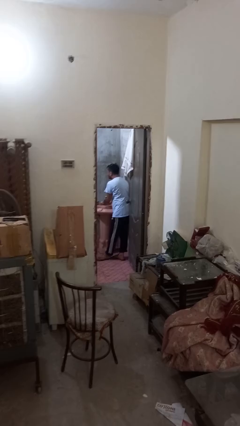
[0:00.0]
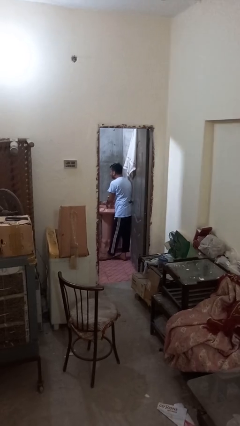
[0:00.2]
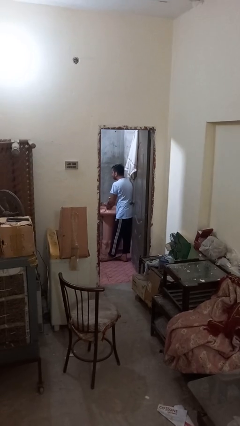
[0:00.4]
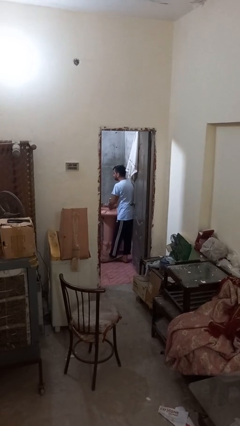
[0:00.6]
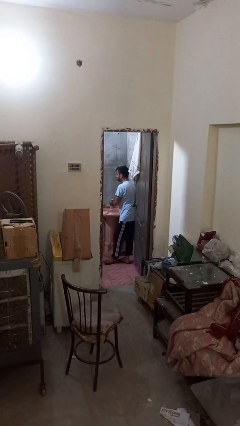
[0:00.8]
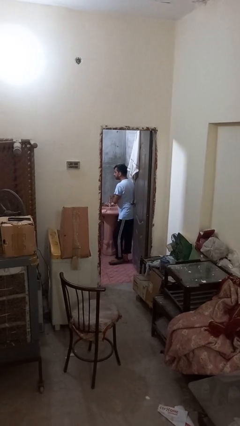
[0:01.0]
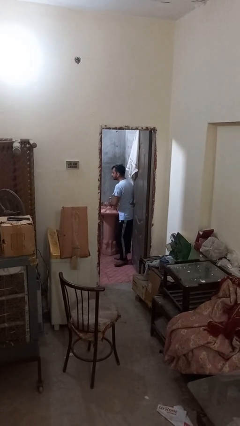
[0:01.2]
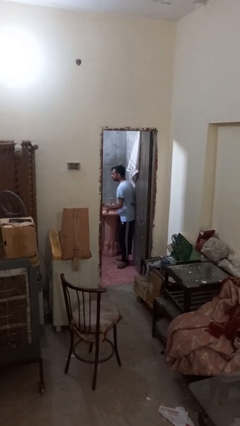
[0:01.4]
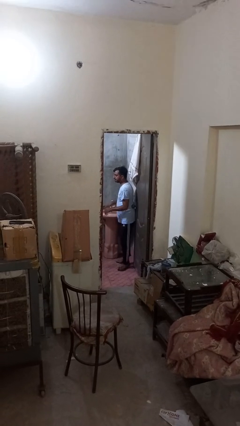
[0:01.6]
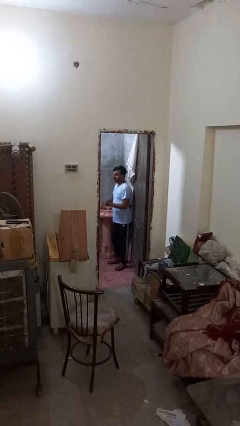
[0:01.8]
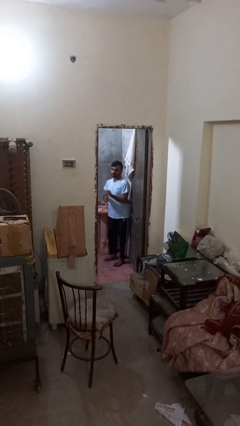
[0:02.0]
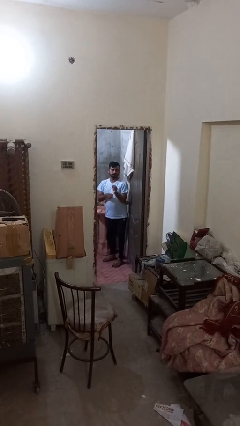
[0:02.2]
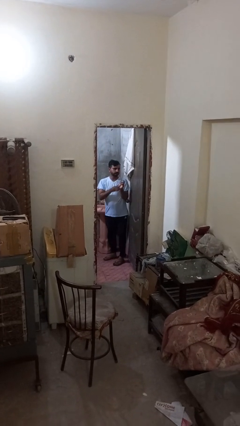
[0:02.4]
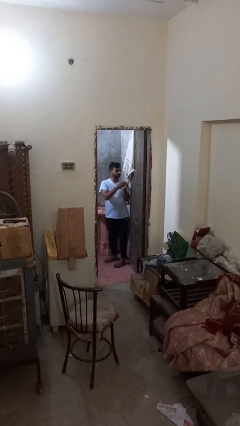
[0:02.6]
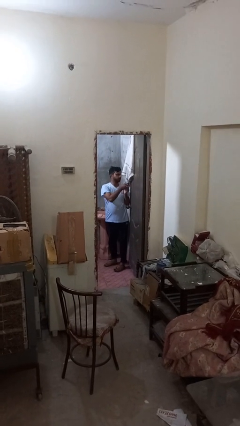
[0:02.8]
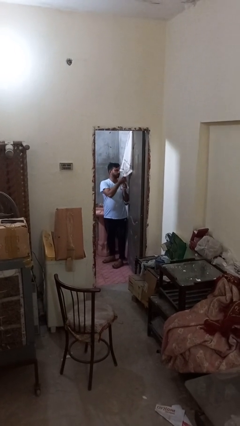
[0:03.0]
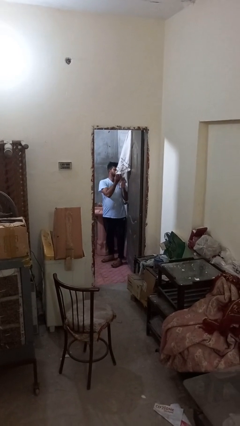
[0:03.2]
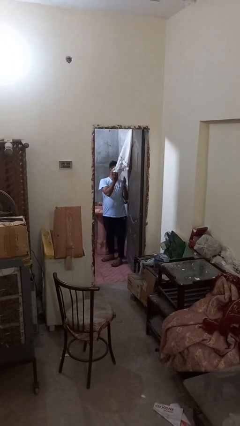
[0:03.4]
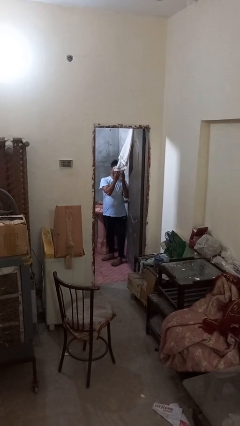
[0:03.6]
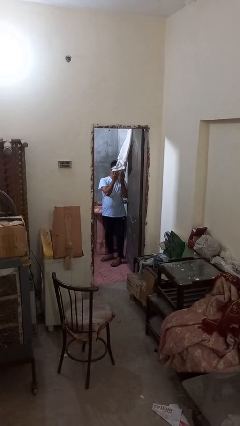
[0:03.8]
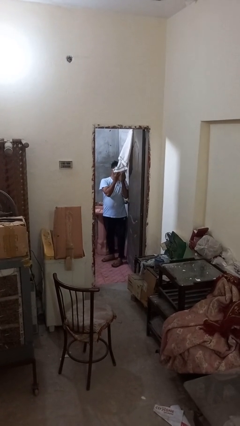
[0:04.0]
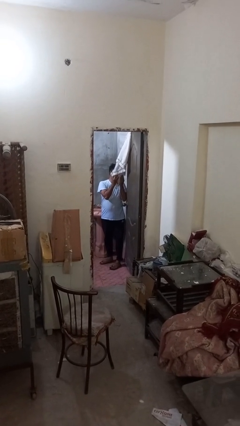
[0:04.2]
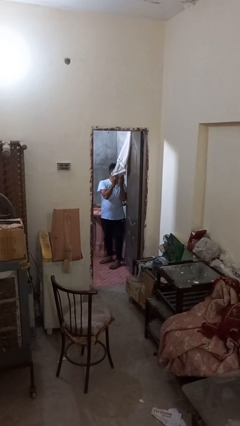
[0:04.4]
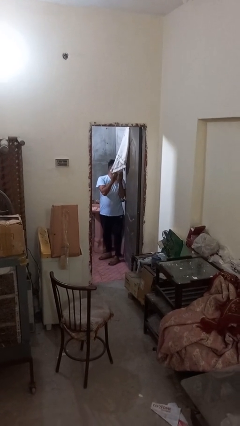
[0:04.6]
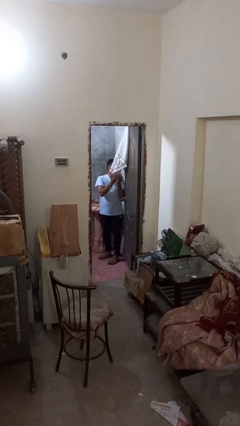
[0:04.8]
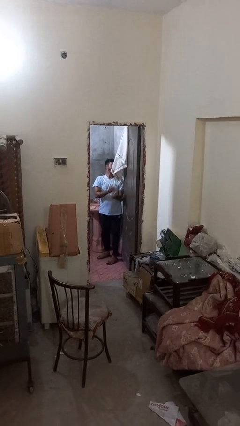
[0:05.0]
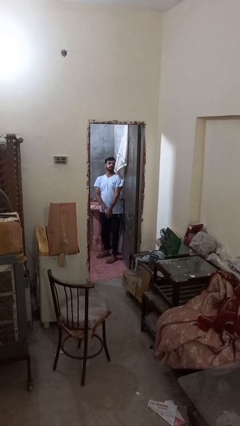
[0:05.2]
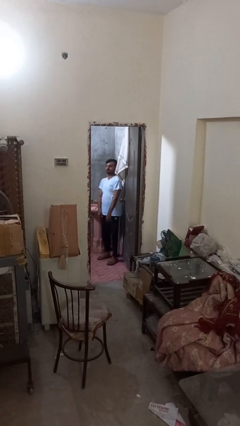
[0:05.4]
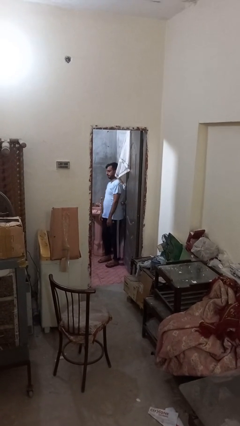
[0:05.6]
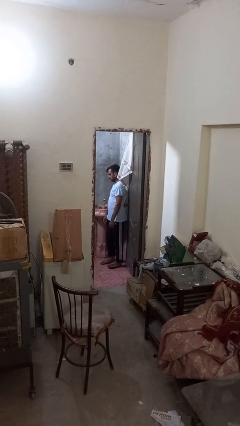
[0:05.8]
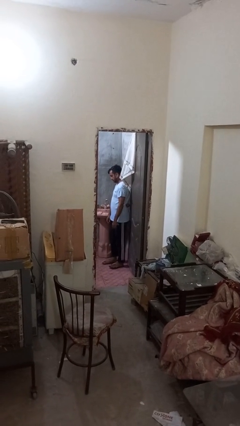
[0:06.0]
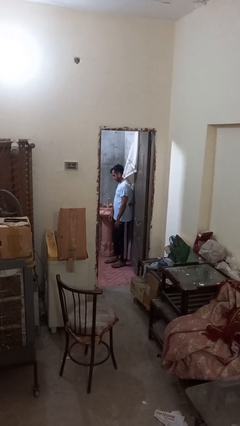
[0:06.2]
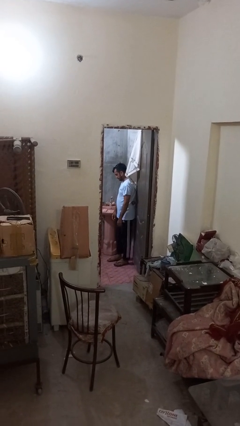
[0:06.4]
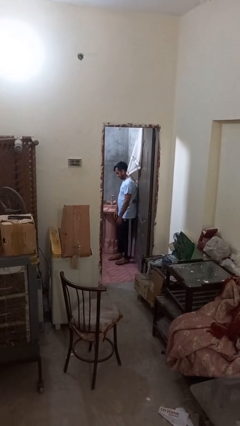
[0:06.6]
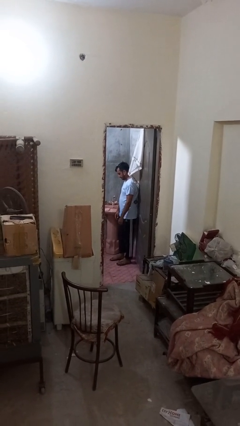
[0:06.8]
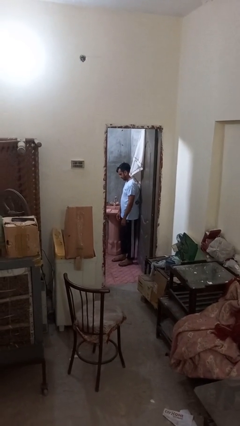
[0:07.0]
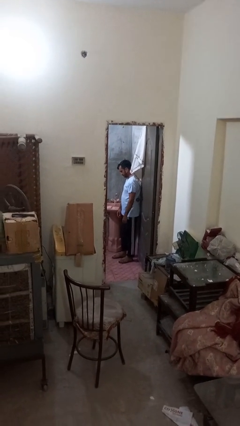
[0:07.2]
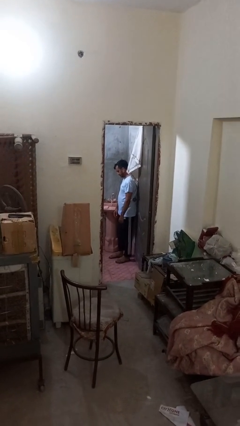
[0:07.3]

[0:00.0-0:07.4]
person dries face with towel

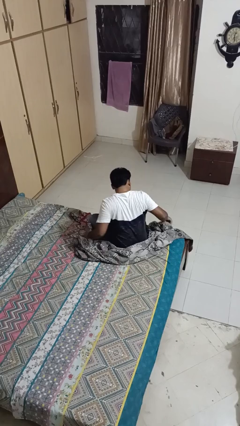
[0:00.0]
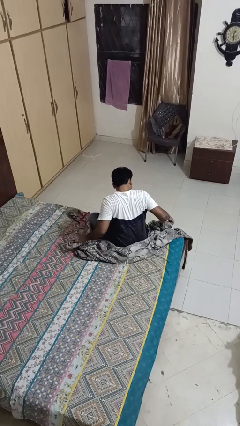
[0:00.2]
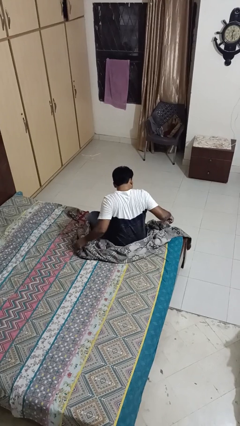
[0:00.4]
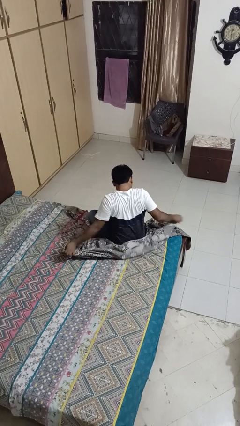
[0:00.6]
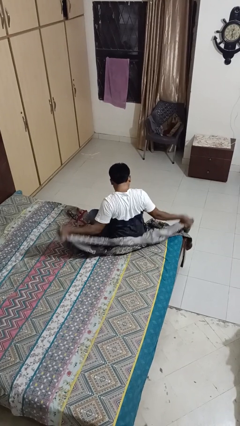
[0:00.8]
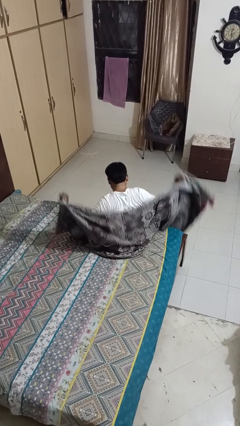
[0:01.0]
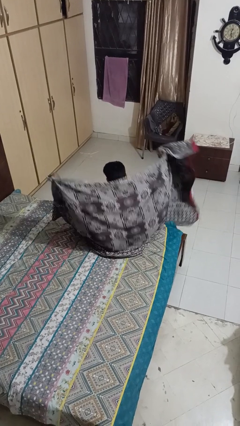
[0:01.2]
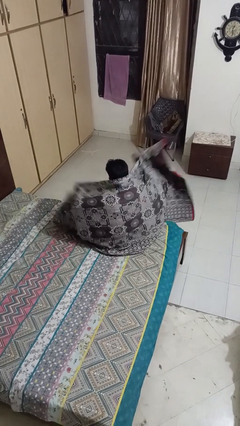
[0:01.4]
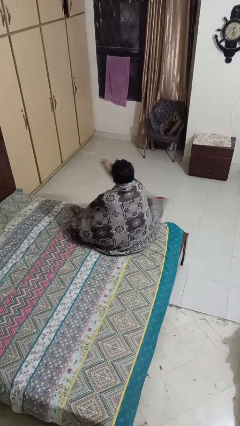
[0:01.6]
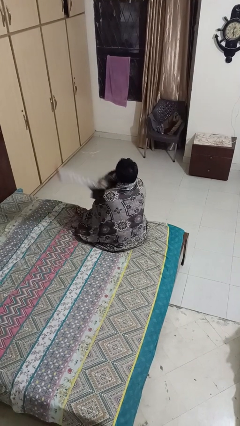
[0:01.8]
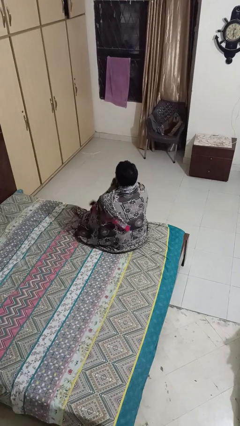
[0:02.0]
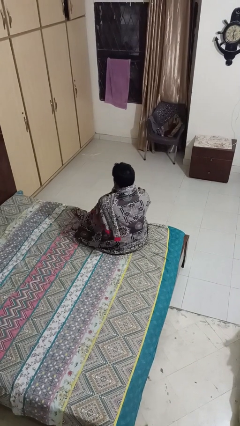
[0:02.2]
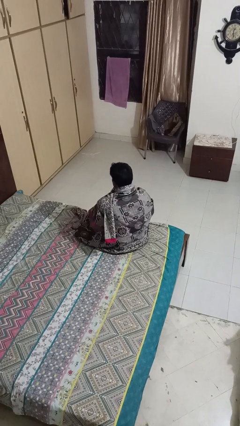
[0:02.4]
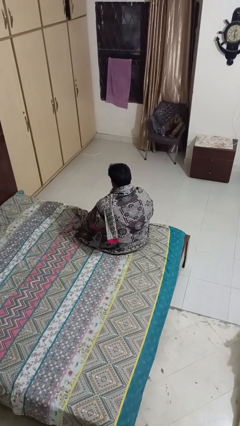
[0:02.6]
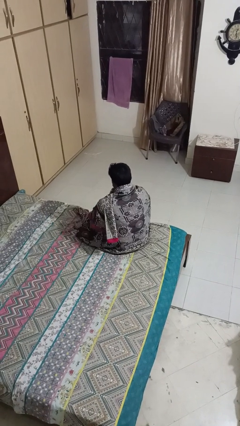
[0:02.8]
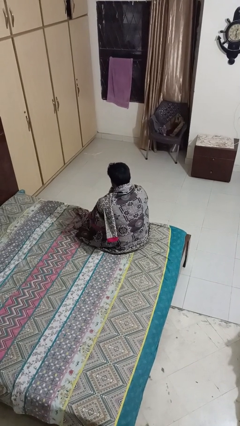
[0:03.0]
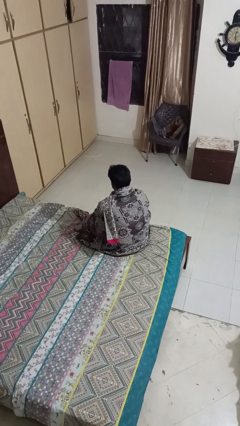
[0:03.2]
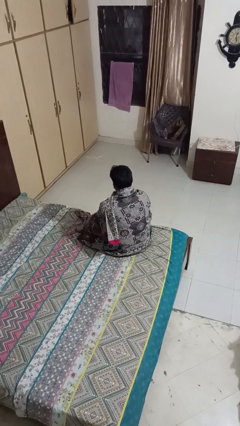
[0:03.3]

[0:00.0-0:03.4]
person covers with blanket

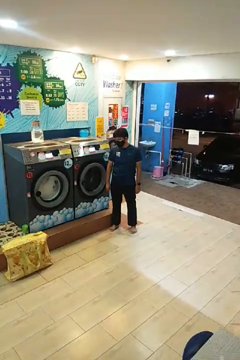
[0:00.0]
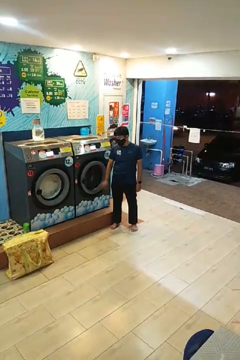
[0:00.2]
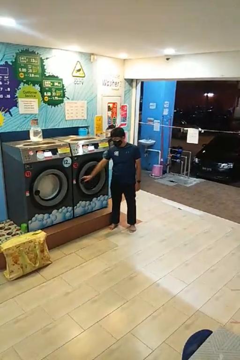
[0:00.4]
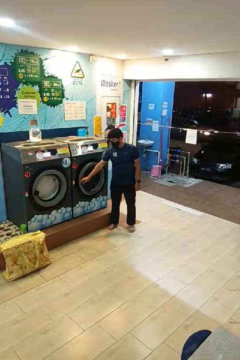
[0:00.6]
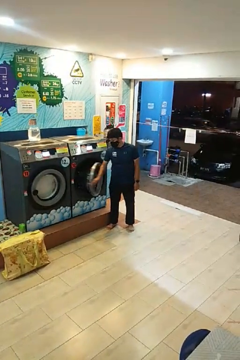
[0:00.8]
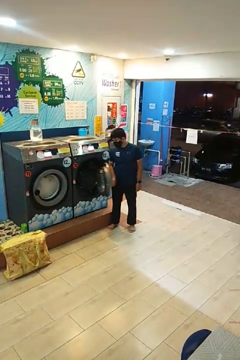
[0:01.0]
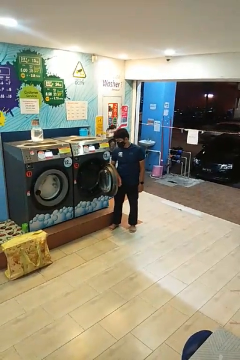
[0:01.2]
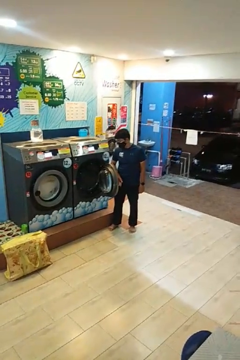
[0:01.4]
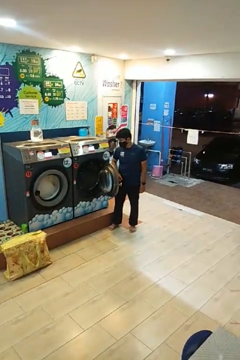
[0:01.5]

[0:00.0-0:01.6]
person opens clothes washer

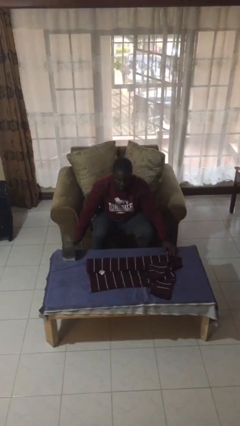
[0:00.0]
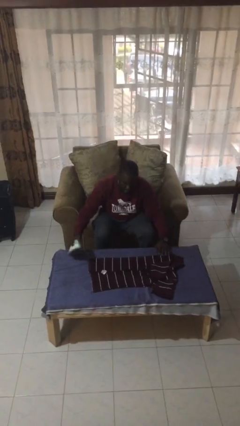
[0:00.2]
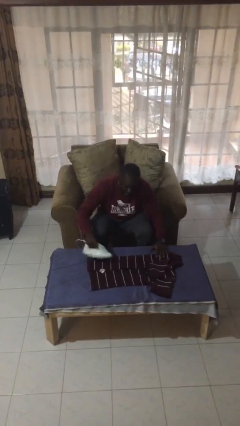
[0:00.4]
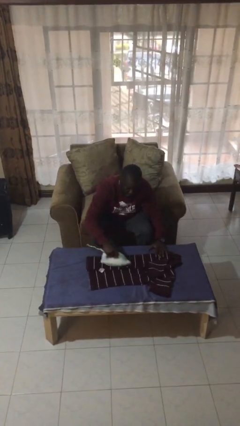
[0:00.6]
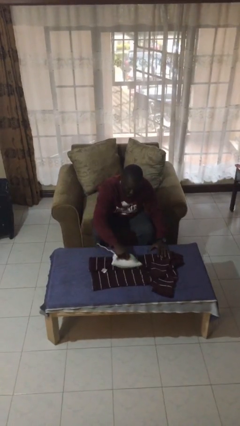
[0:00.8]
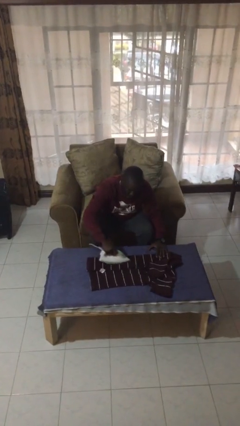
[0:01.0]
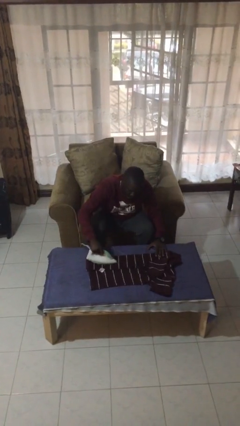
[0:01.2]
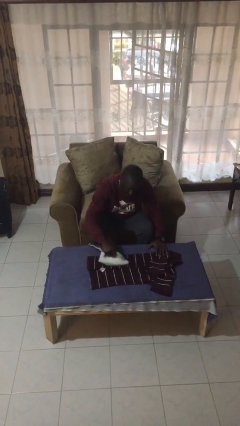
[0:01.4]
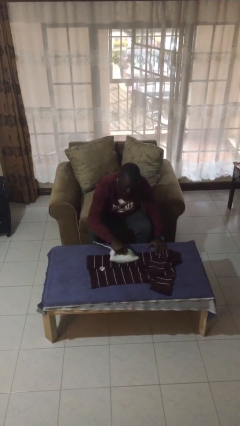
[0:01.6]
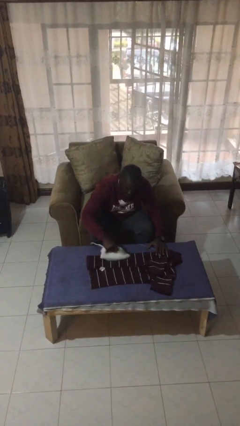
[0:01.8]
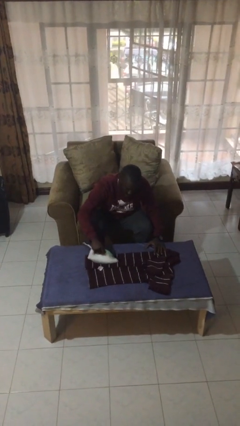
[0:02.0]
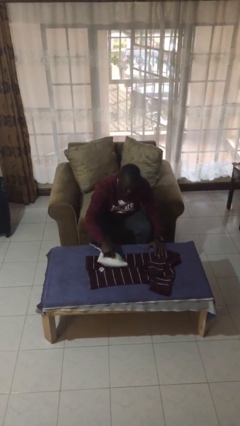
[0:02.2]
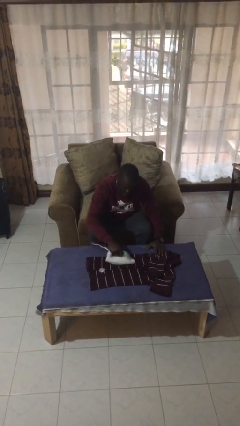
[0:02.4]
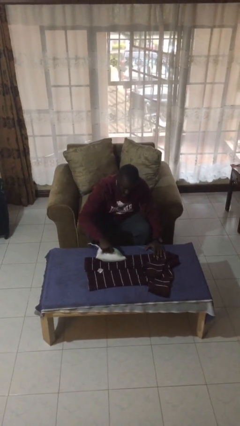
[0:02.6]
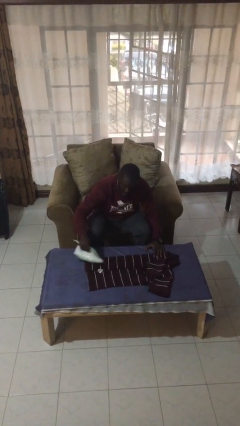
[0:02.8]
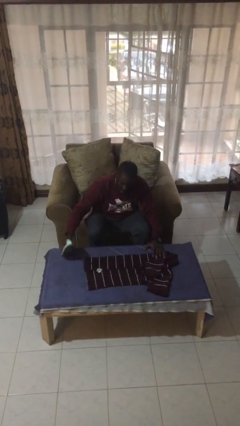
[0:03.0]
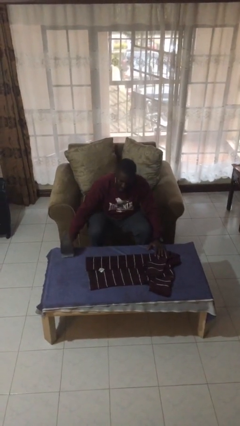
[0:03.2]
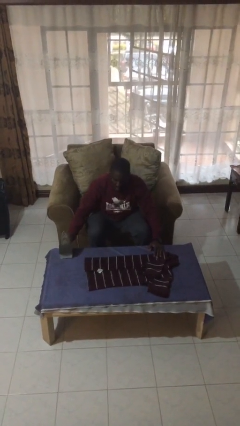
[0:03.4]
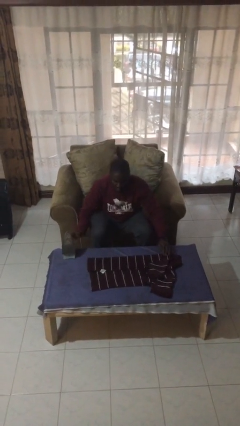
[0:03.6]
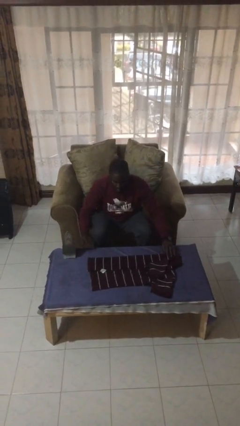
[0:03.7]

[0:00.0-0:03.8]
person irons clothes

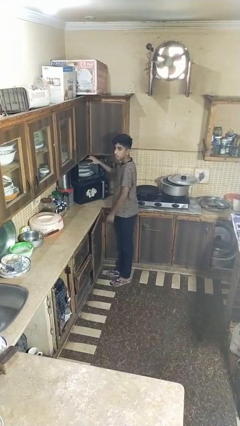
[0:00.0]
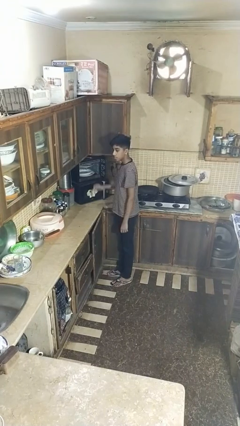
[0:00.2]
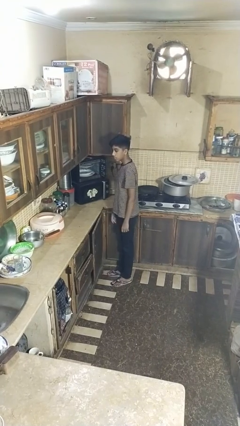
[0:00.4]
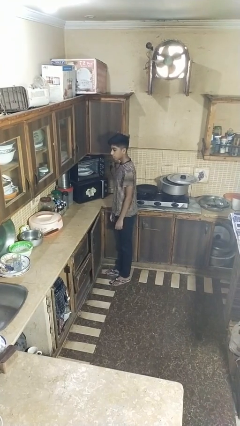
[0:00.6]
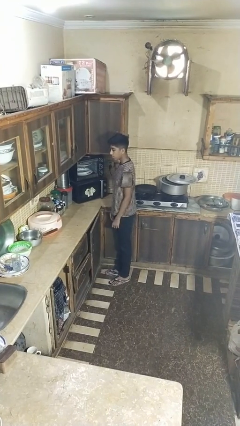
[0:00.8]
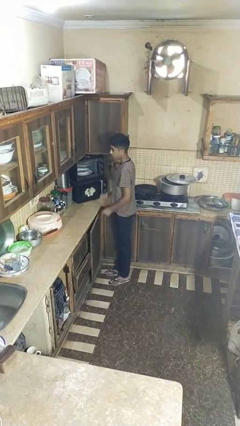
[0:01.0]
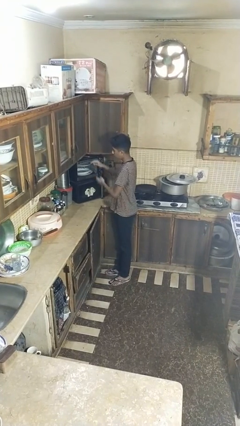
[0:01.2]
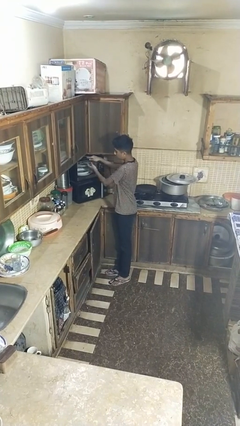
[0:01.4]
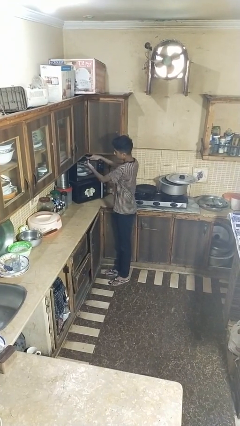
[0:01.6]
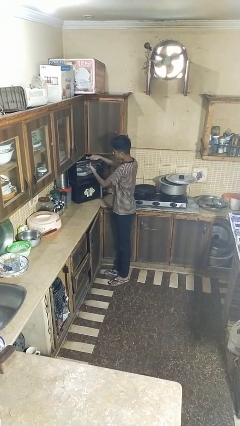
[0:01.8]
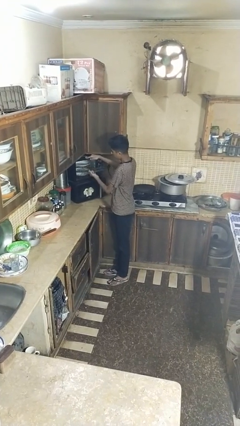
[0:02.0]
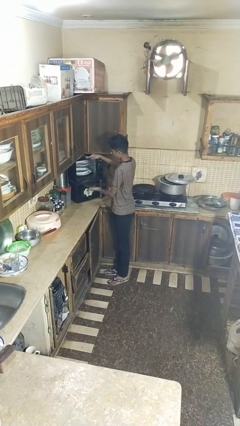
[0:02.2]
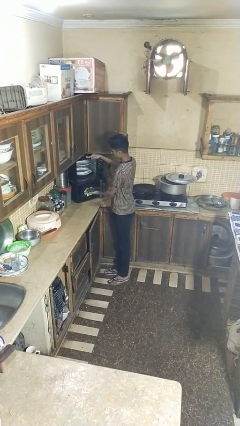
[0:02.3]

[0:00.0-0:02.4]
person opens dishwasher
